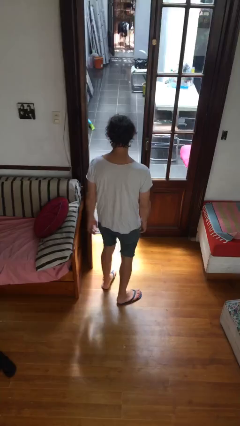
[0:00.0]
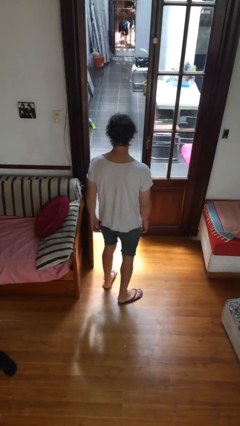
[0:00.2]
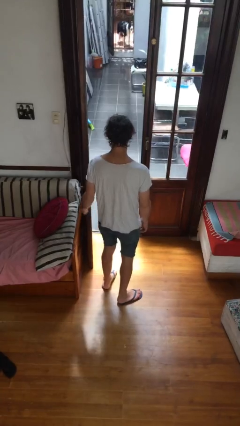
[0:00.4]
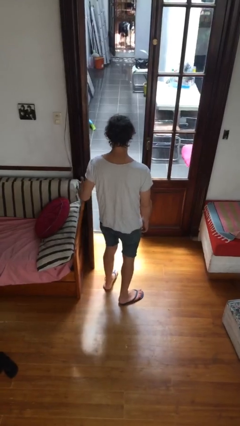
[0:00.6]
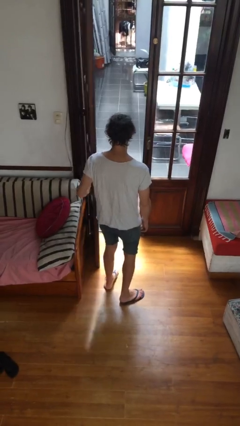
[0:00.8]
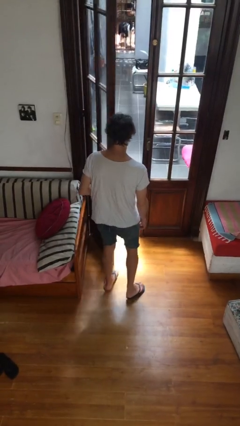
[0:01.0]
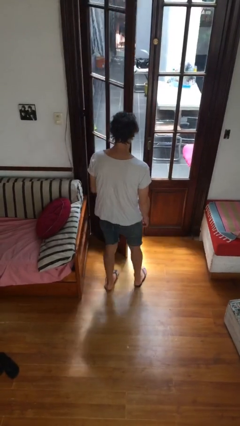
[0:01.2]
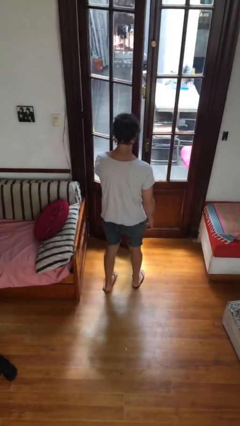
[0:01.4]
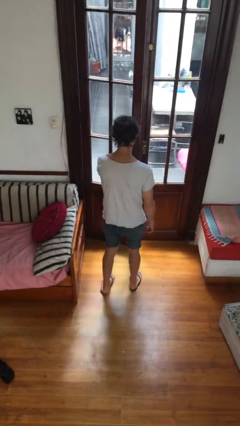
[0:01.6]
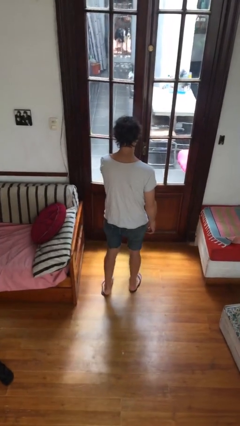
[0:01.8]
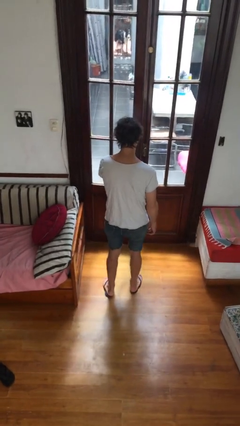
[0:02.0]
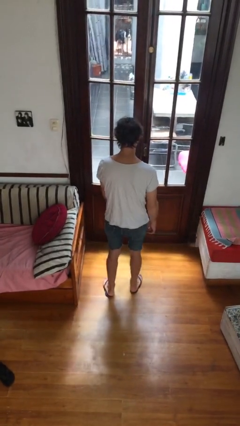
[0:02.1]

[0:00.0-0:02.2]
person closes facility door

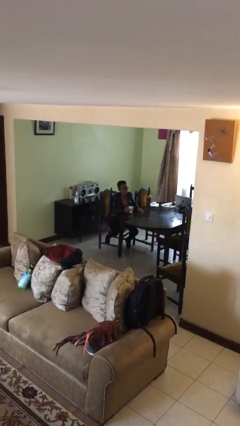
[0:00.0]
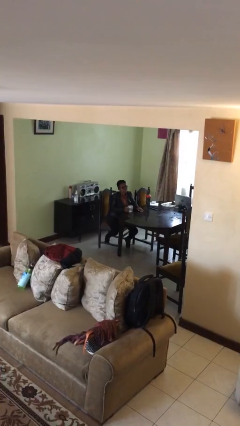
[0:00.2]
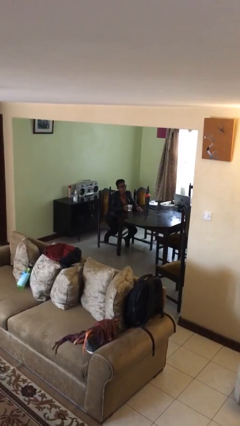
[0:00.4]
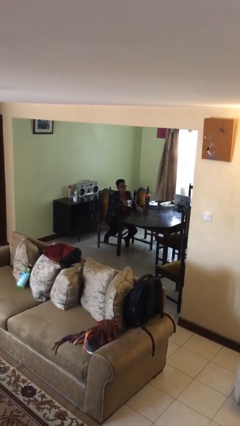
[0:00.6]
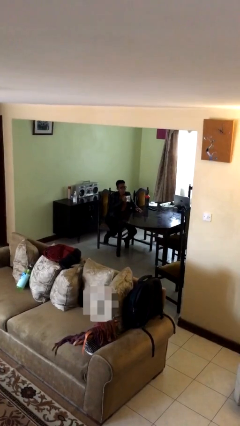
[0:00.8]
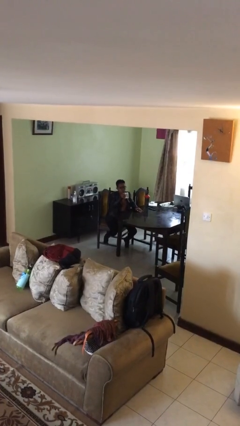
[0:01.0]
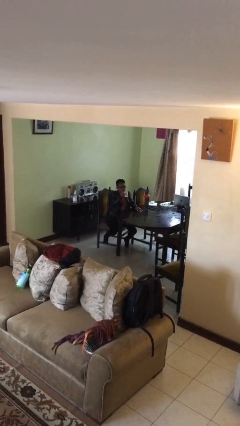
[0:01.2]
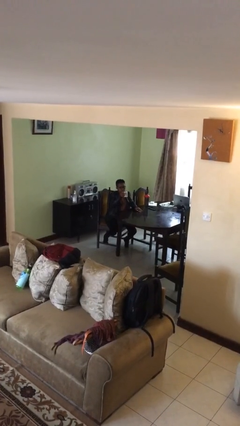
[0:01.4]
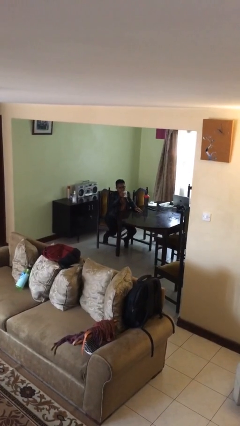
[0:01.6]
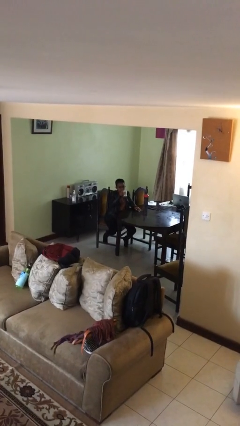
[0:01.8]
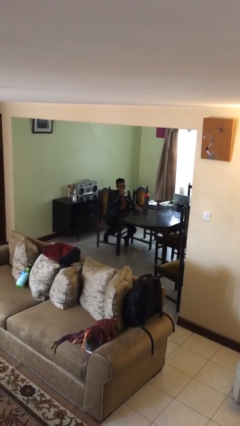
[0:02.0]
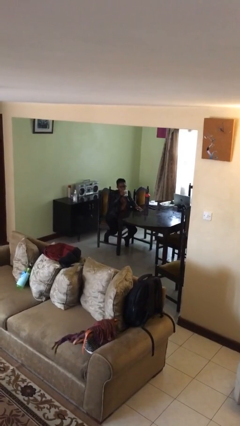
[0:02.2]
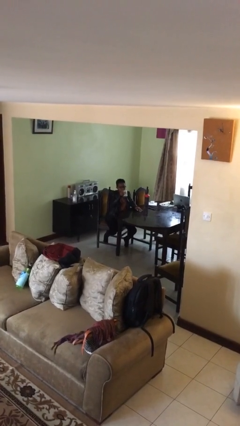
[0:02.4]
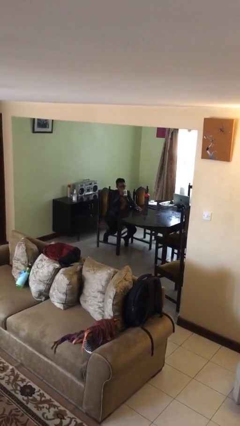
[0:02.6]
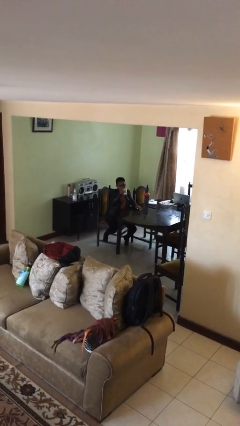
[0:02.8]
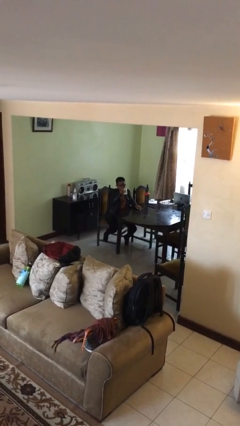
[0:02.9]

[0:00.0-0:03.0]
person picks up object from table

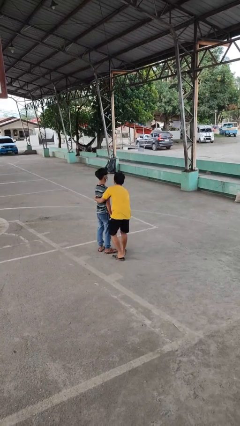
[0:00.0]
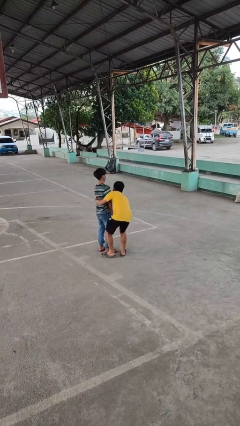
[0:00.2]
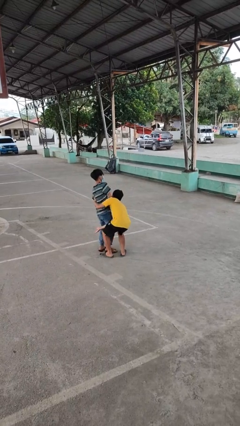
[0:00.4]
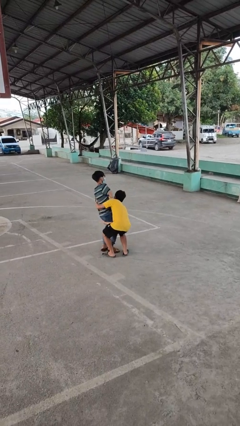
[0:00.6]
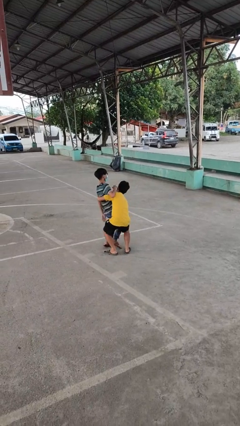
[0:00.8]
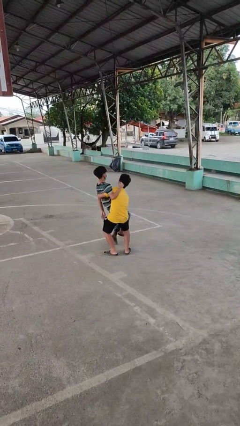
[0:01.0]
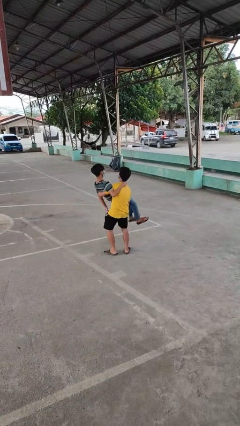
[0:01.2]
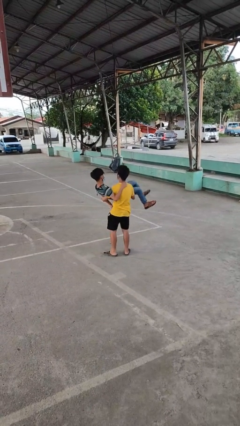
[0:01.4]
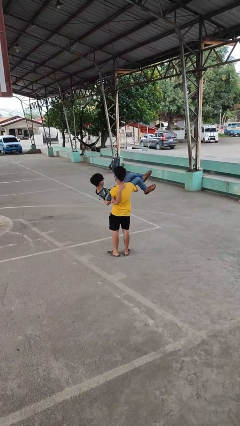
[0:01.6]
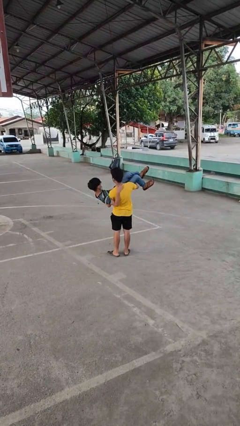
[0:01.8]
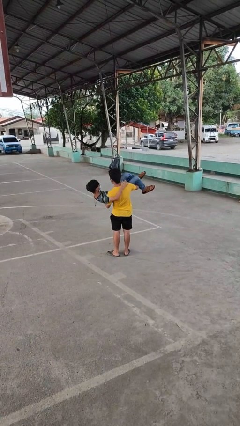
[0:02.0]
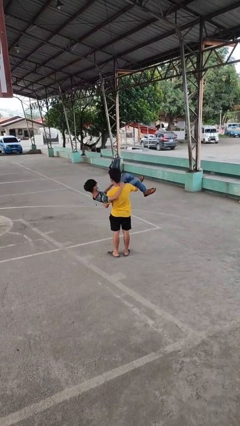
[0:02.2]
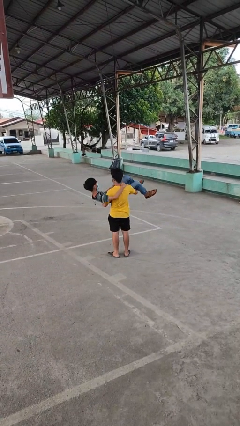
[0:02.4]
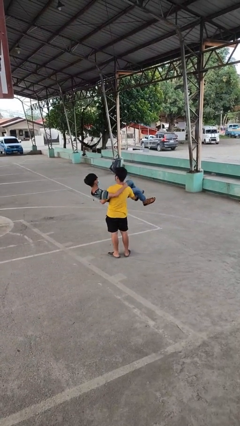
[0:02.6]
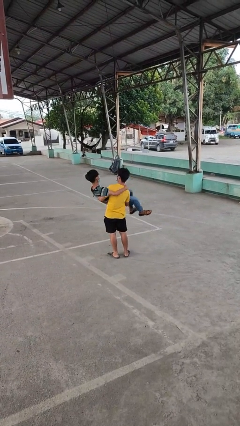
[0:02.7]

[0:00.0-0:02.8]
person picks up person

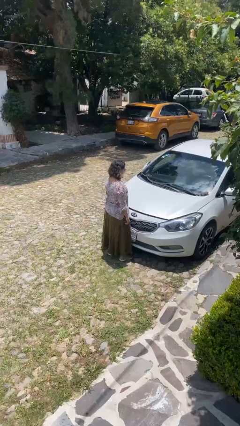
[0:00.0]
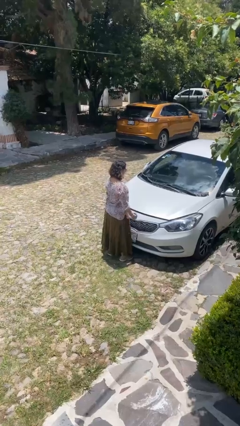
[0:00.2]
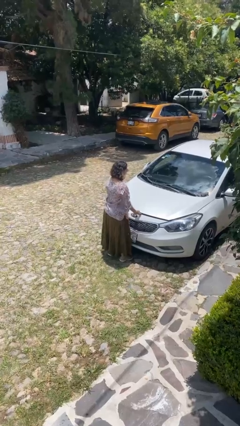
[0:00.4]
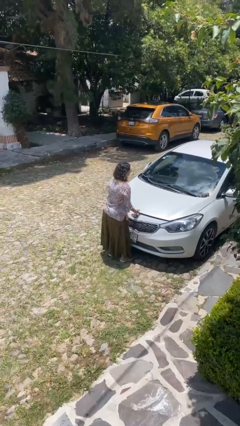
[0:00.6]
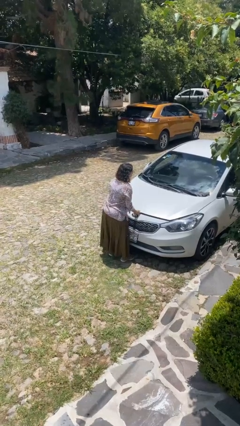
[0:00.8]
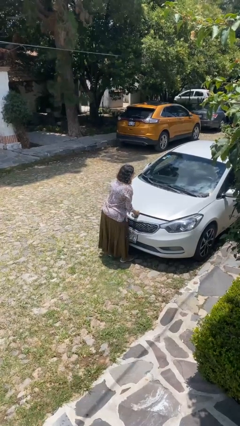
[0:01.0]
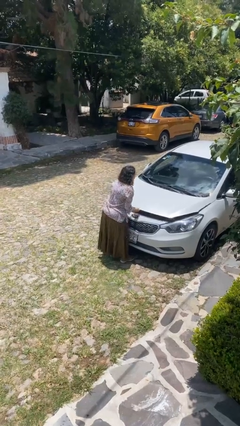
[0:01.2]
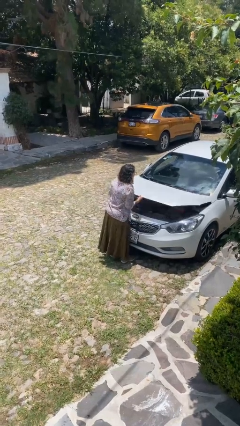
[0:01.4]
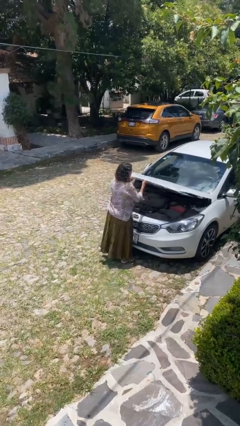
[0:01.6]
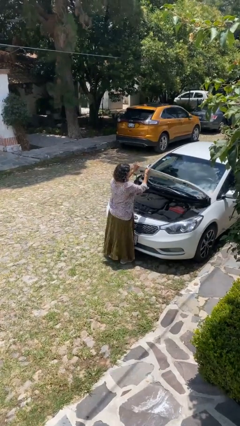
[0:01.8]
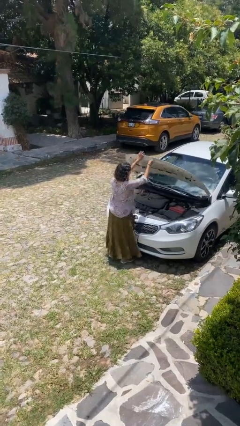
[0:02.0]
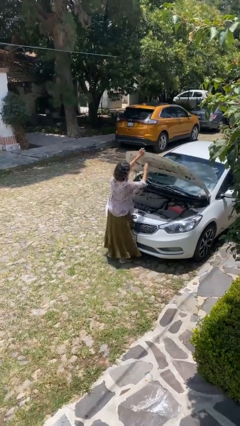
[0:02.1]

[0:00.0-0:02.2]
person opens car hood

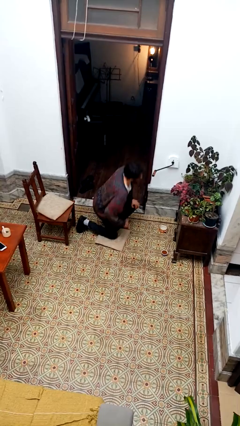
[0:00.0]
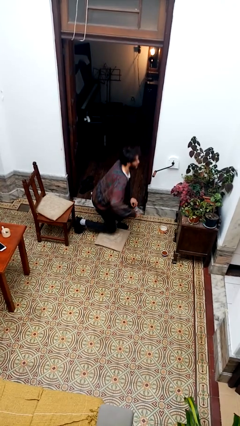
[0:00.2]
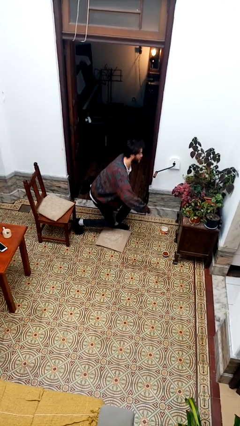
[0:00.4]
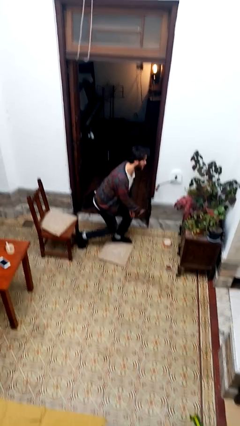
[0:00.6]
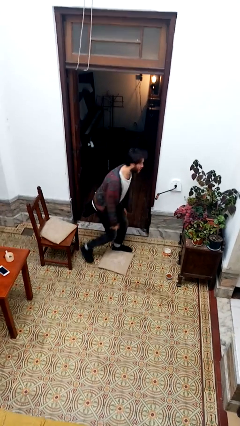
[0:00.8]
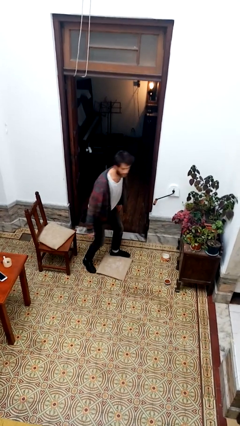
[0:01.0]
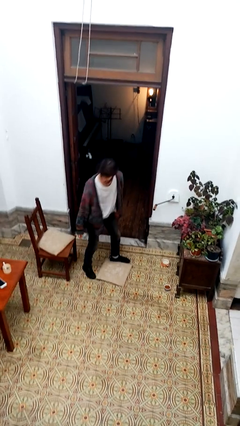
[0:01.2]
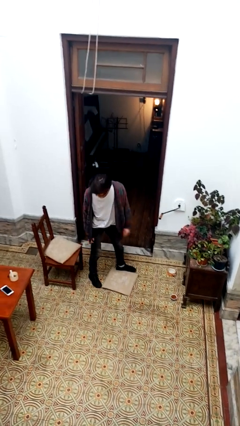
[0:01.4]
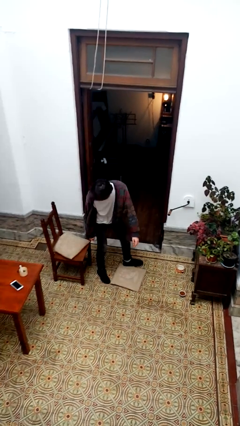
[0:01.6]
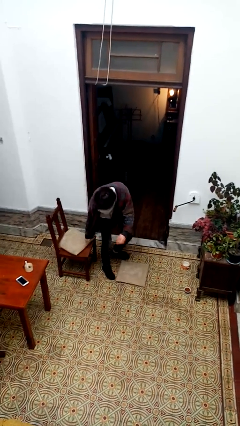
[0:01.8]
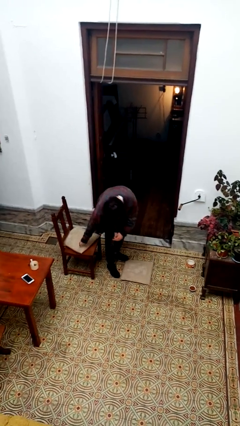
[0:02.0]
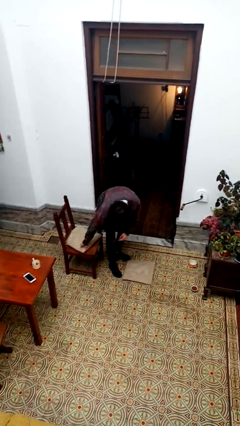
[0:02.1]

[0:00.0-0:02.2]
person stands up from floor

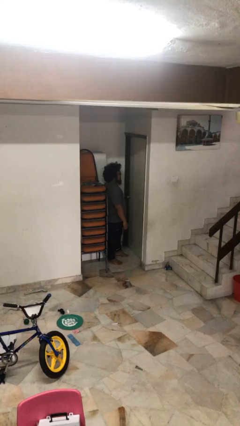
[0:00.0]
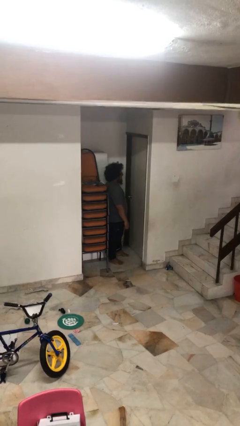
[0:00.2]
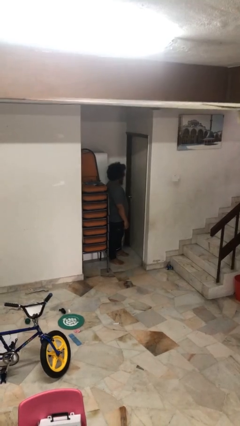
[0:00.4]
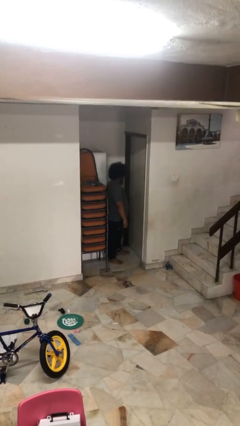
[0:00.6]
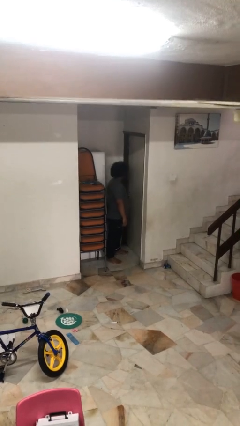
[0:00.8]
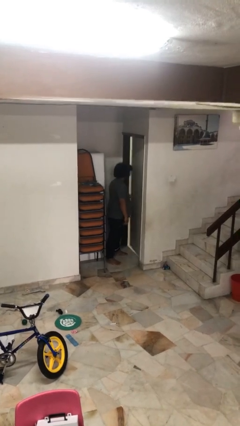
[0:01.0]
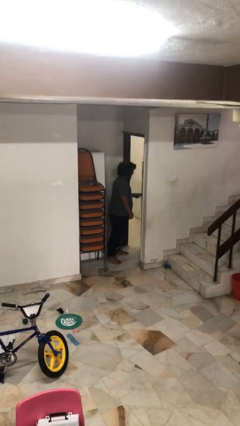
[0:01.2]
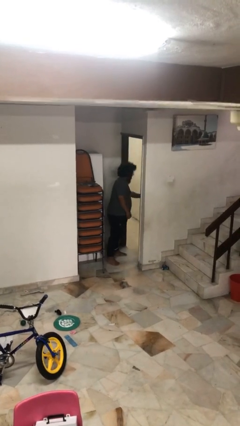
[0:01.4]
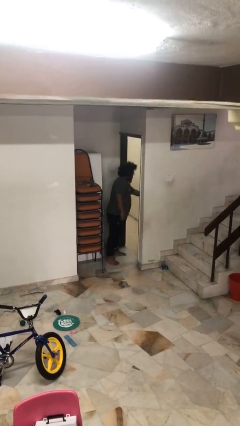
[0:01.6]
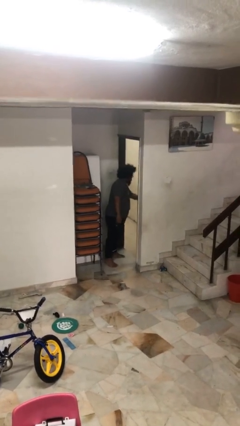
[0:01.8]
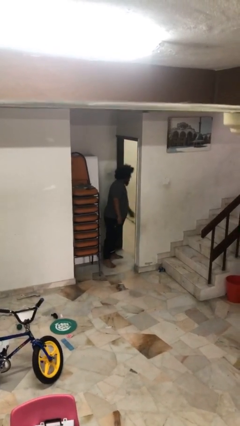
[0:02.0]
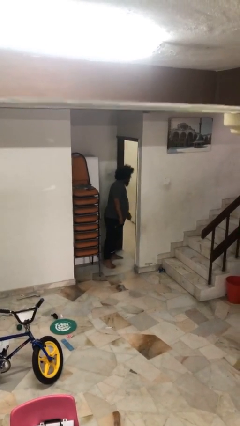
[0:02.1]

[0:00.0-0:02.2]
person opens facility door

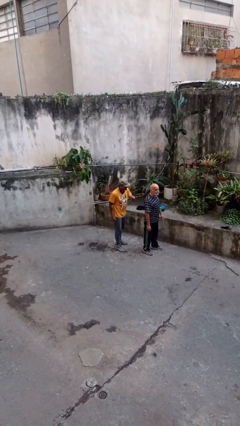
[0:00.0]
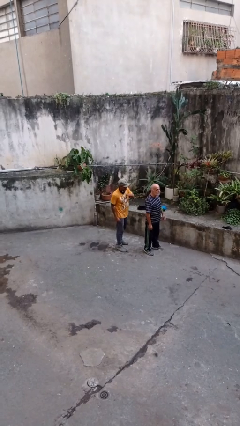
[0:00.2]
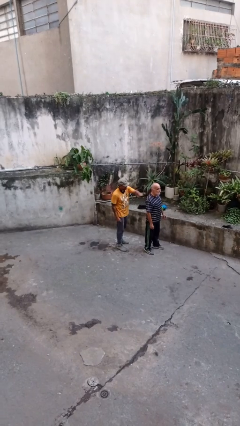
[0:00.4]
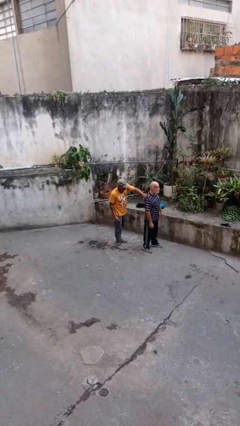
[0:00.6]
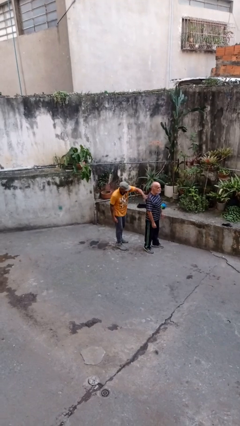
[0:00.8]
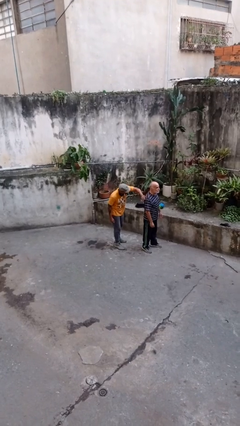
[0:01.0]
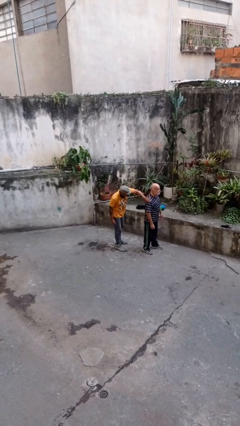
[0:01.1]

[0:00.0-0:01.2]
person grabs person by shoulder

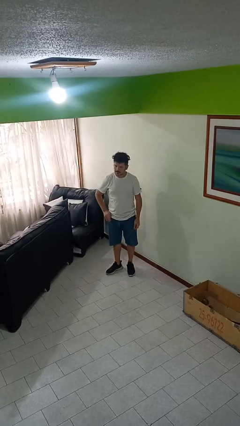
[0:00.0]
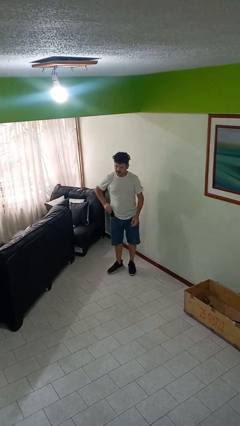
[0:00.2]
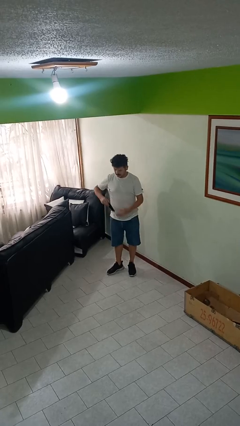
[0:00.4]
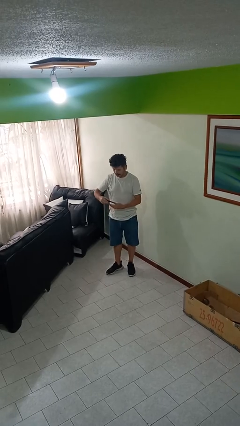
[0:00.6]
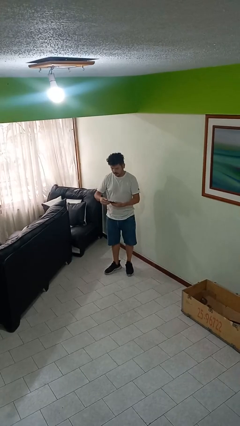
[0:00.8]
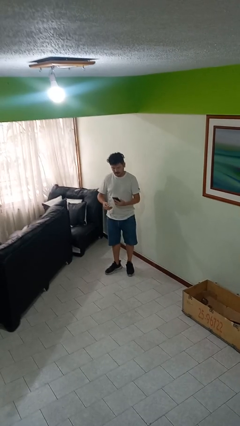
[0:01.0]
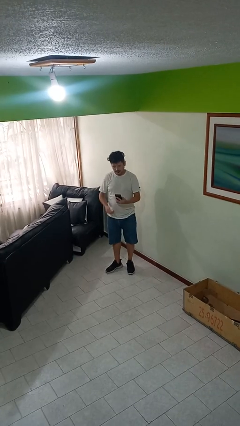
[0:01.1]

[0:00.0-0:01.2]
person takes phone from pocket
